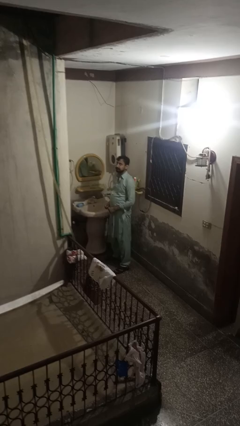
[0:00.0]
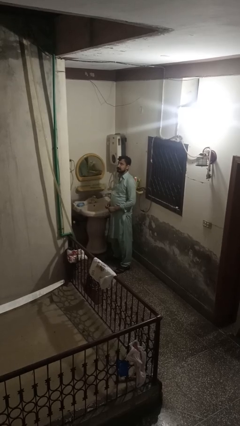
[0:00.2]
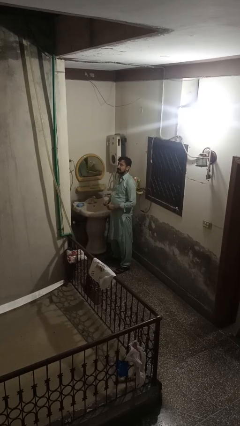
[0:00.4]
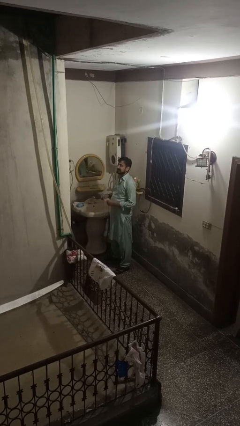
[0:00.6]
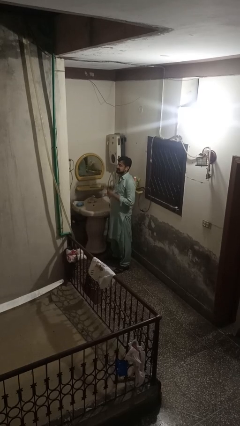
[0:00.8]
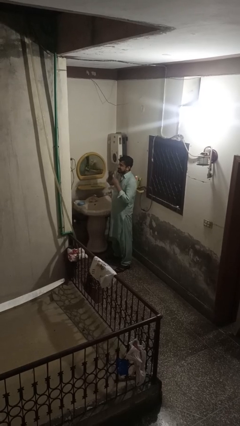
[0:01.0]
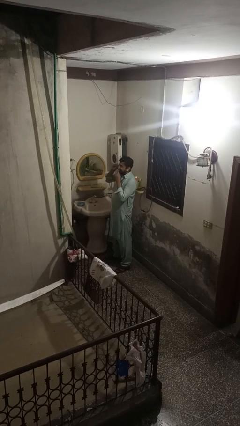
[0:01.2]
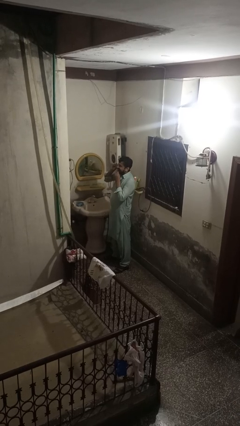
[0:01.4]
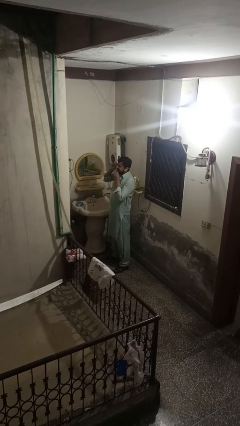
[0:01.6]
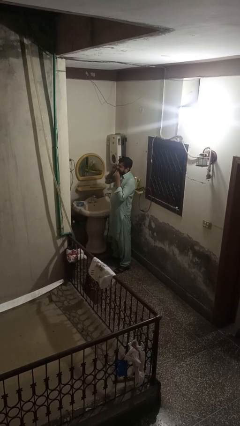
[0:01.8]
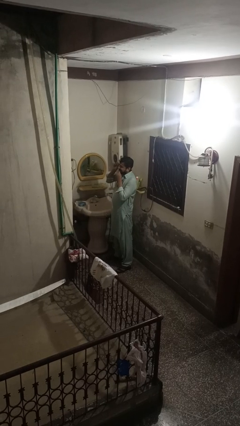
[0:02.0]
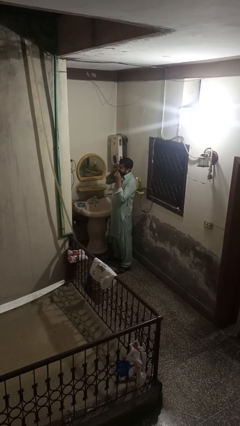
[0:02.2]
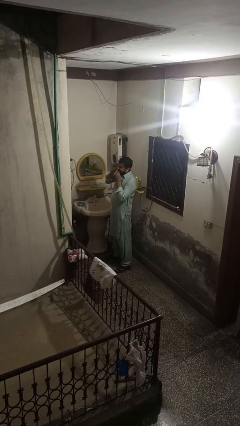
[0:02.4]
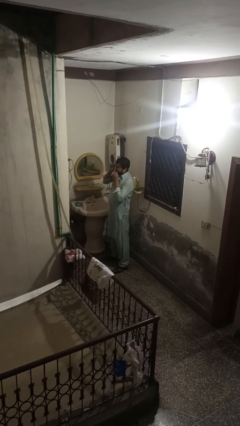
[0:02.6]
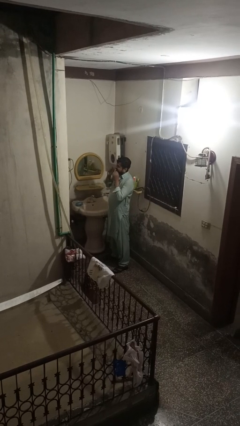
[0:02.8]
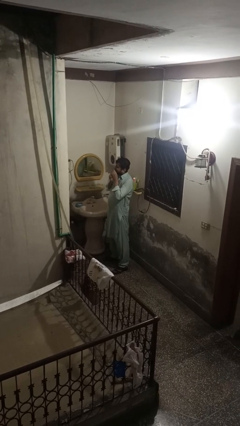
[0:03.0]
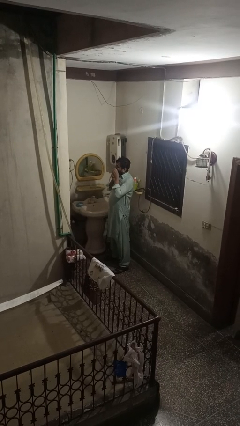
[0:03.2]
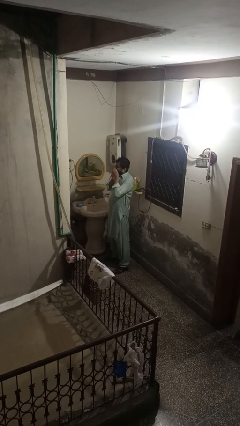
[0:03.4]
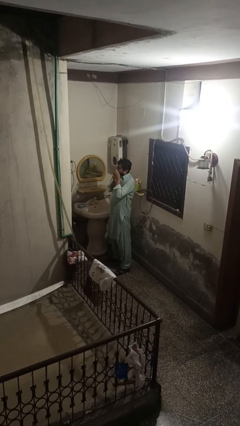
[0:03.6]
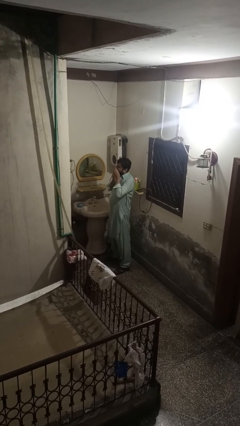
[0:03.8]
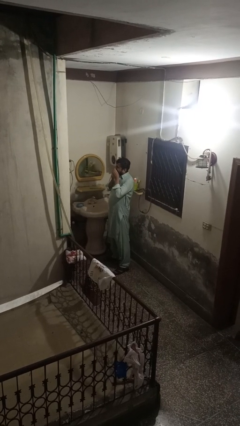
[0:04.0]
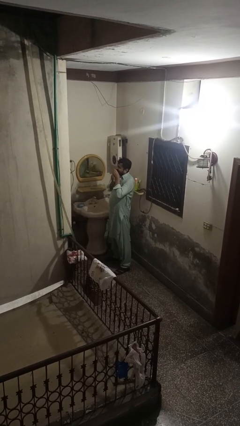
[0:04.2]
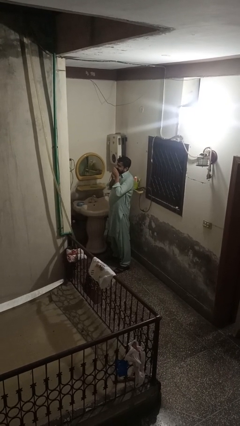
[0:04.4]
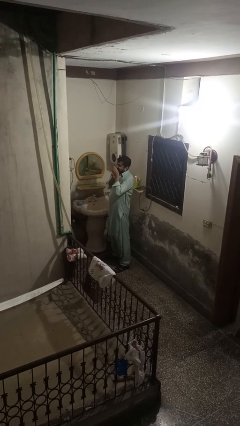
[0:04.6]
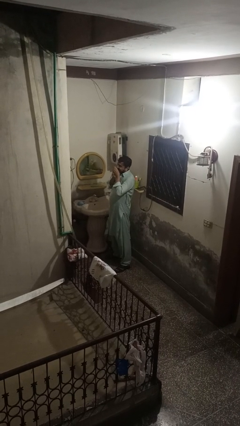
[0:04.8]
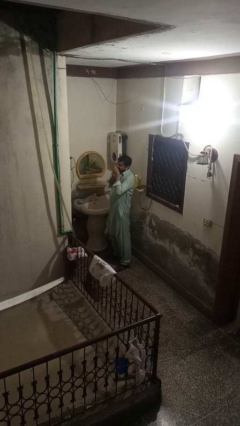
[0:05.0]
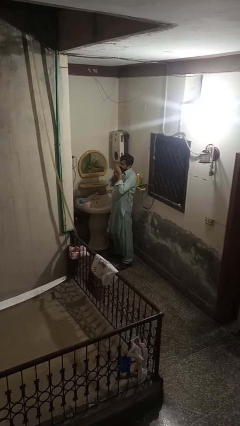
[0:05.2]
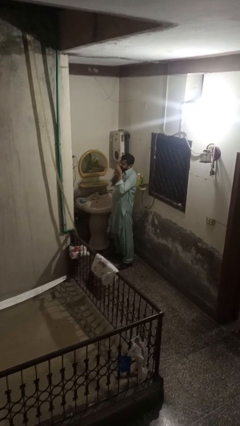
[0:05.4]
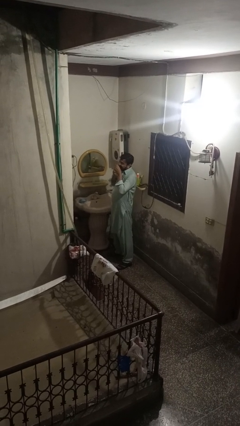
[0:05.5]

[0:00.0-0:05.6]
person flosses

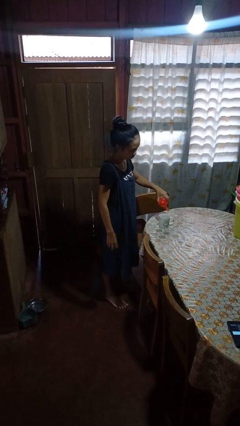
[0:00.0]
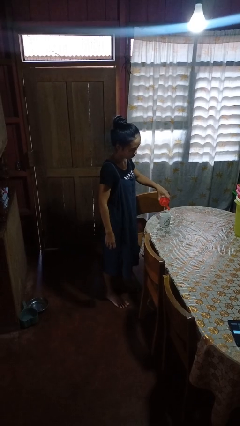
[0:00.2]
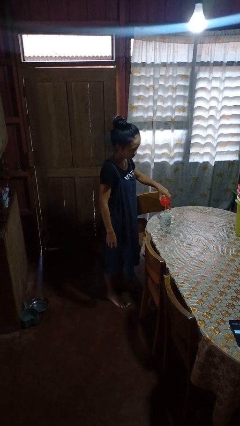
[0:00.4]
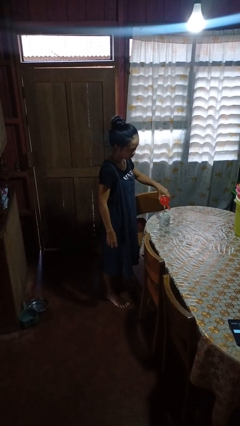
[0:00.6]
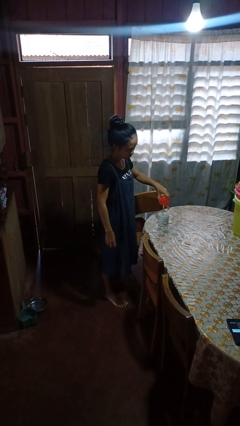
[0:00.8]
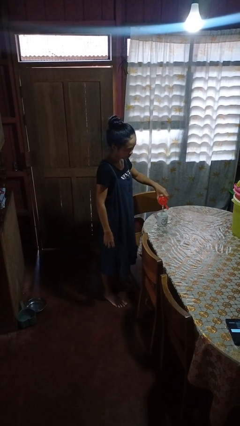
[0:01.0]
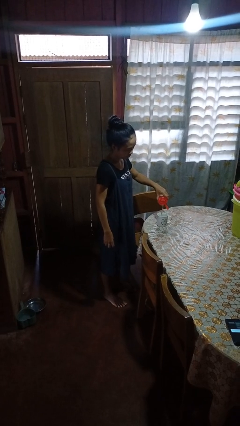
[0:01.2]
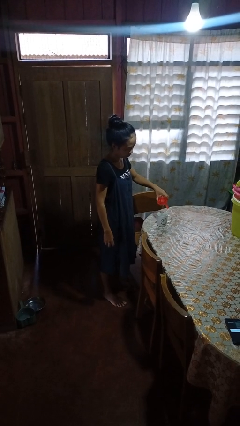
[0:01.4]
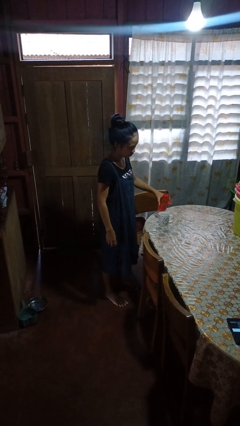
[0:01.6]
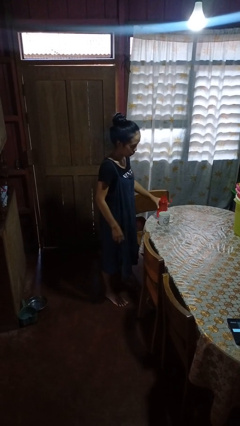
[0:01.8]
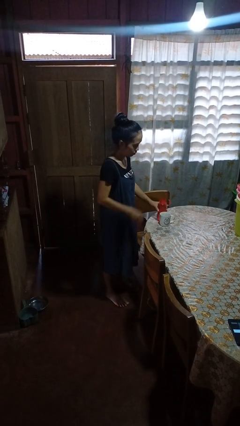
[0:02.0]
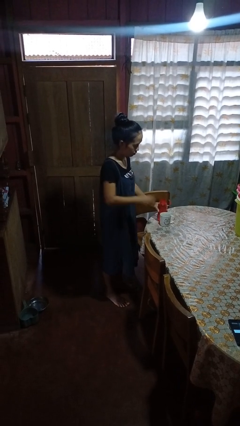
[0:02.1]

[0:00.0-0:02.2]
person pours liquid into cup

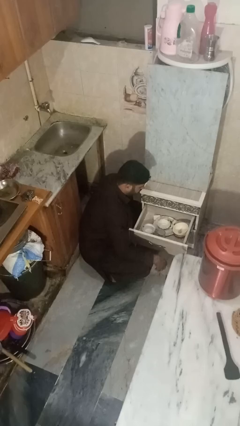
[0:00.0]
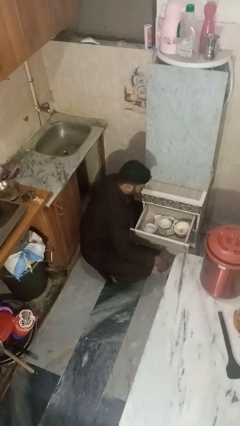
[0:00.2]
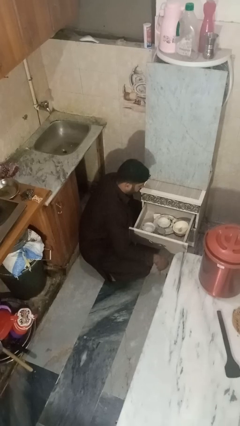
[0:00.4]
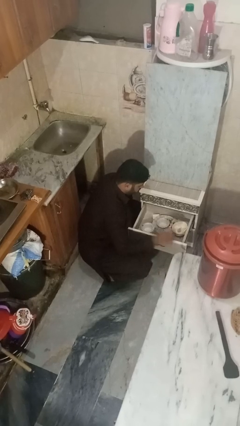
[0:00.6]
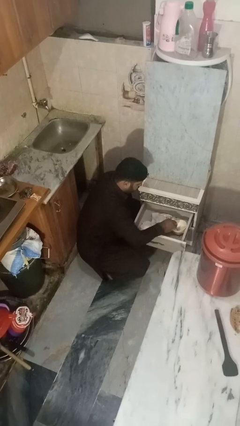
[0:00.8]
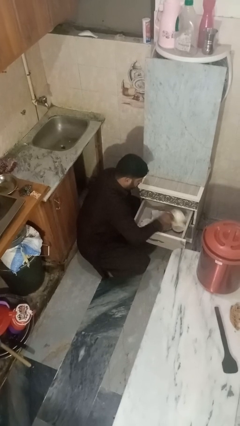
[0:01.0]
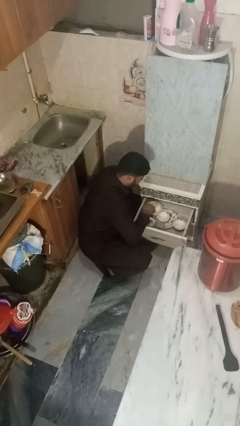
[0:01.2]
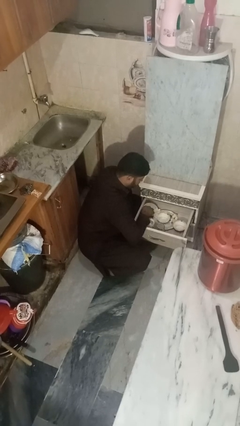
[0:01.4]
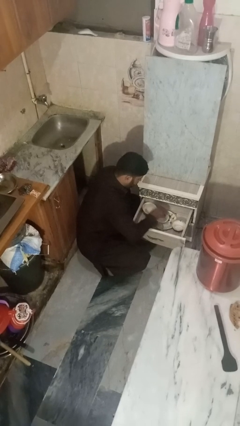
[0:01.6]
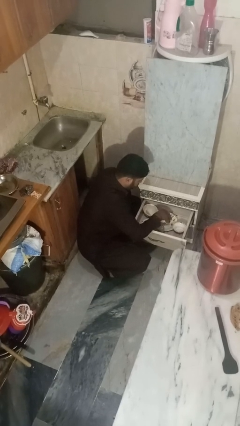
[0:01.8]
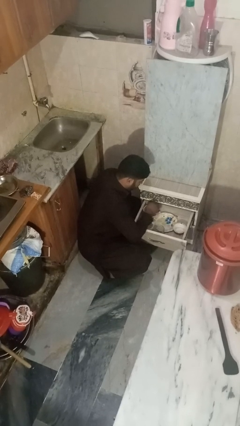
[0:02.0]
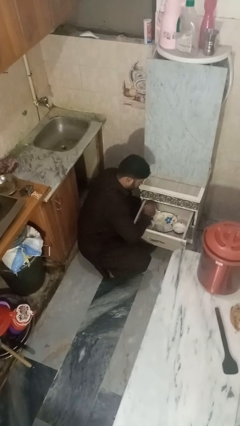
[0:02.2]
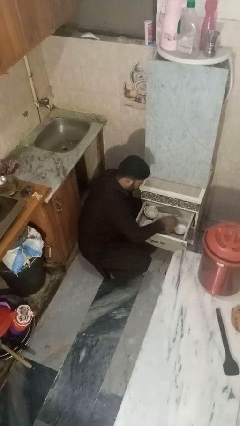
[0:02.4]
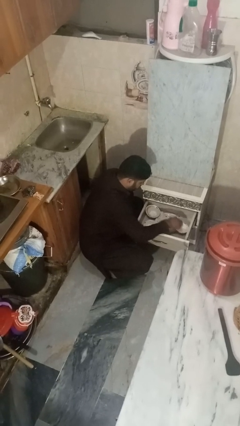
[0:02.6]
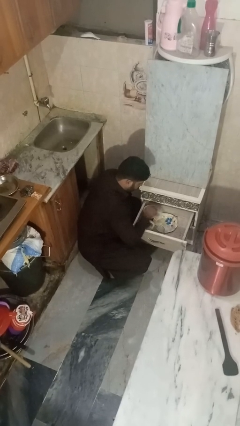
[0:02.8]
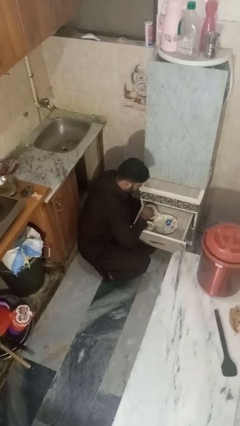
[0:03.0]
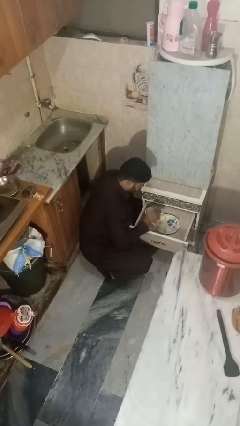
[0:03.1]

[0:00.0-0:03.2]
person searches in kitchen drawer

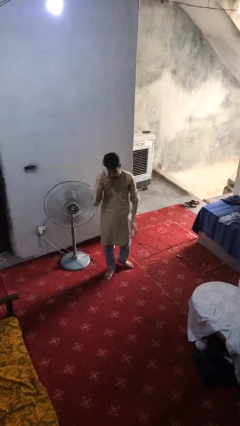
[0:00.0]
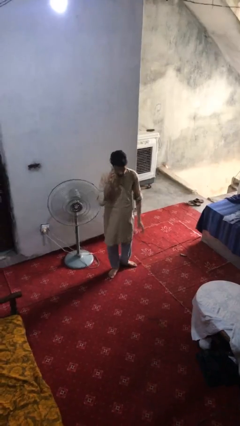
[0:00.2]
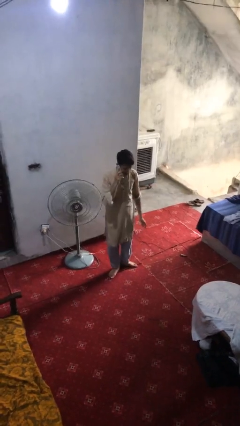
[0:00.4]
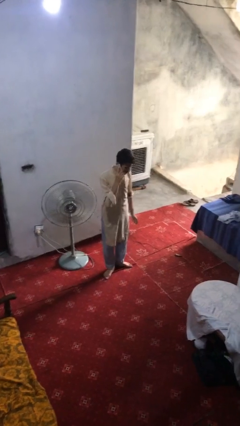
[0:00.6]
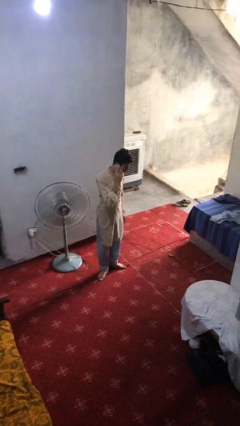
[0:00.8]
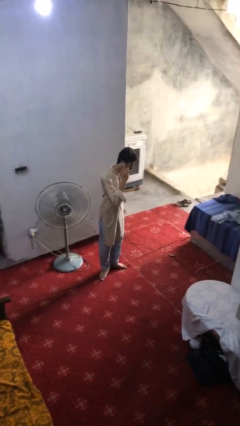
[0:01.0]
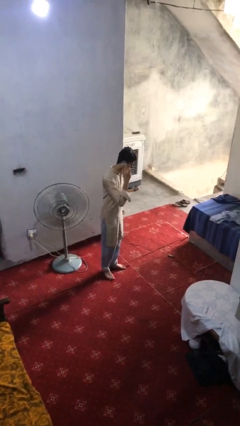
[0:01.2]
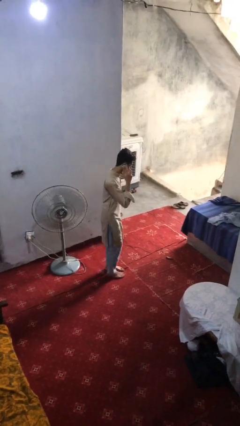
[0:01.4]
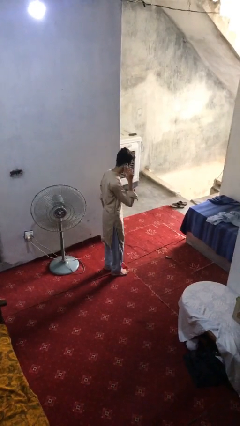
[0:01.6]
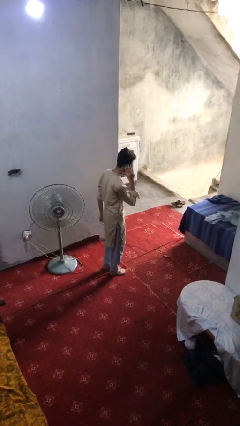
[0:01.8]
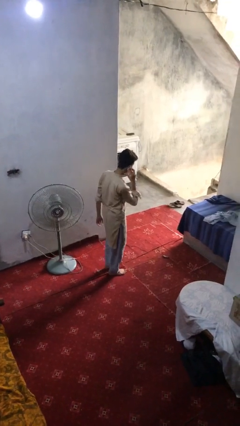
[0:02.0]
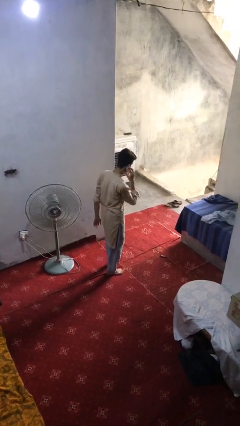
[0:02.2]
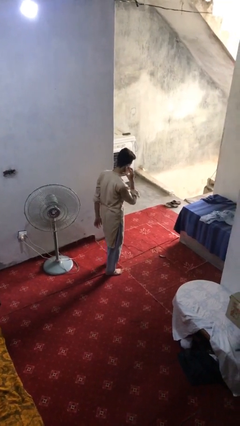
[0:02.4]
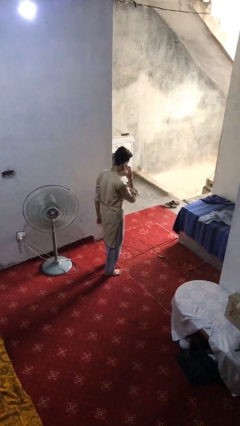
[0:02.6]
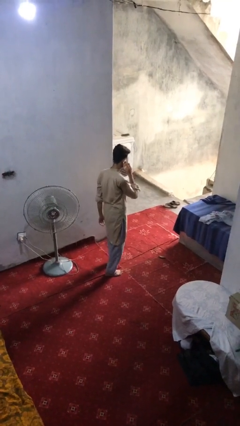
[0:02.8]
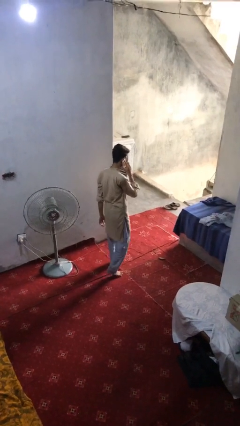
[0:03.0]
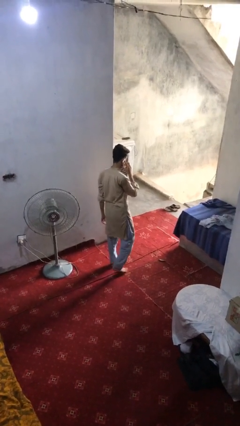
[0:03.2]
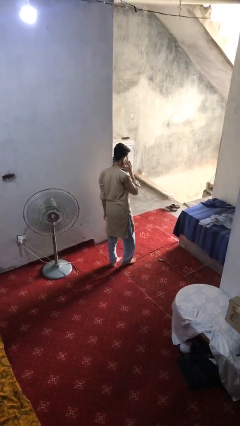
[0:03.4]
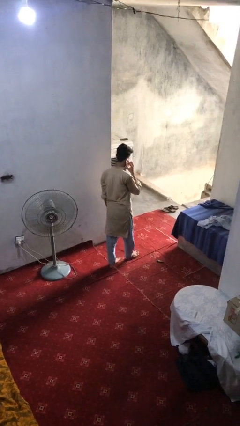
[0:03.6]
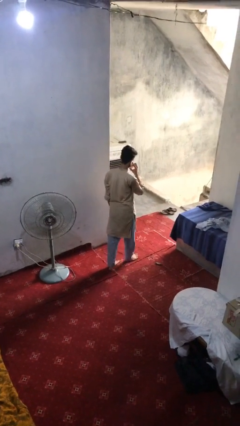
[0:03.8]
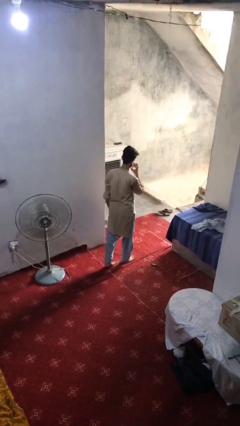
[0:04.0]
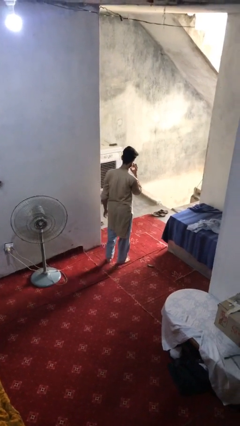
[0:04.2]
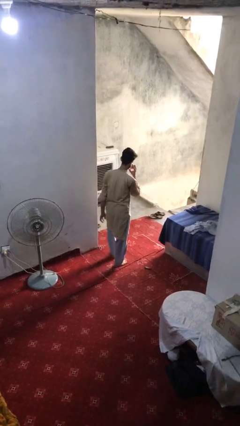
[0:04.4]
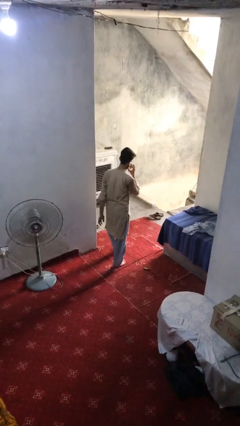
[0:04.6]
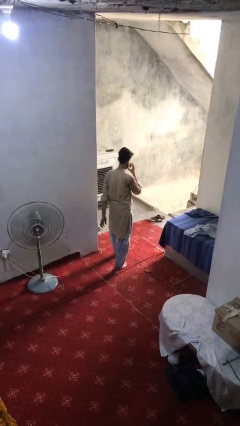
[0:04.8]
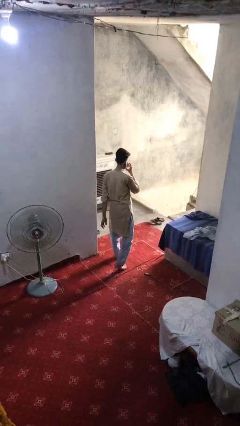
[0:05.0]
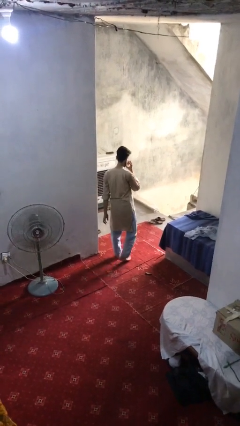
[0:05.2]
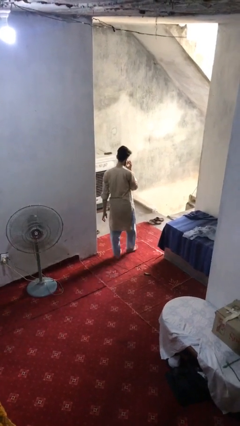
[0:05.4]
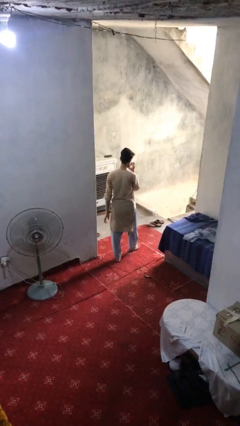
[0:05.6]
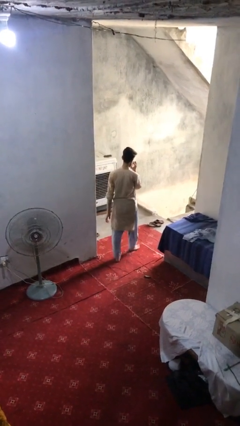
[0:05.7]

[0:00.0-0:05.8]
person talks on phone

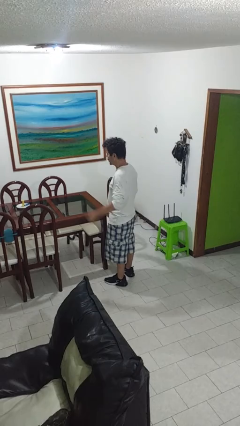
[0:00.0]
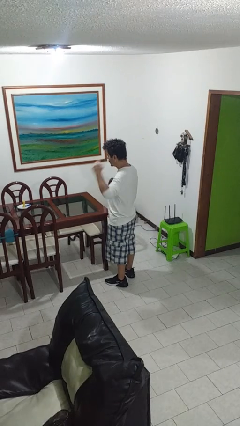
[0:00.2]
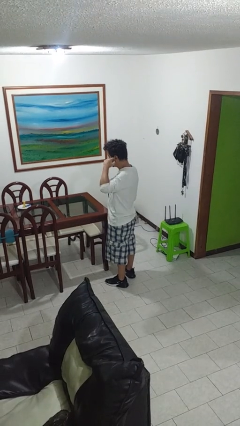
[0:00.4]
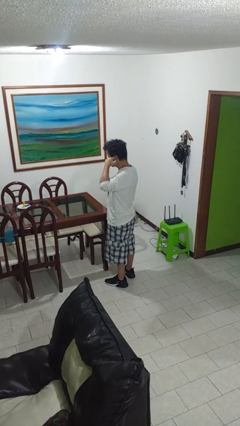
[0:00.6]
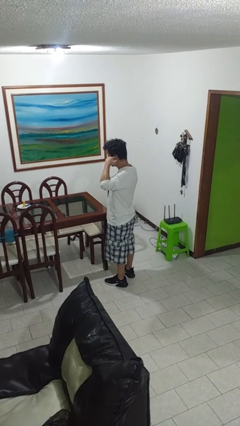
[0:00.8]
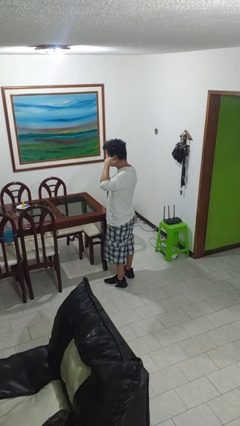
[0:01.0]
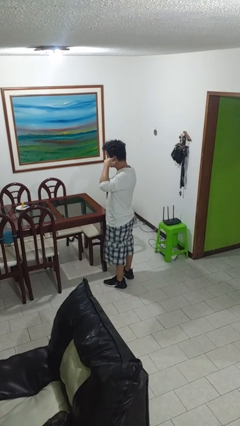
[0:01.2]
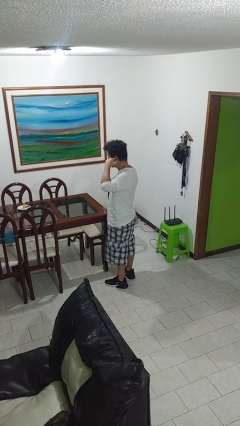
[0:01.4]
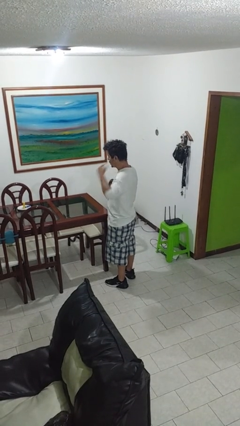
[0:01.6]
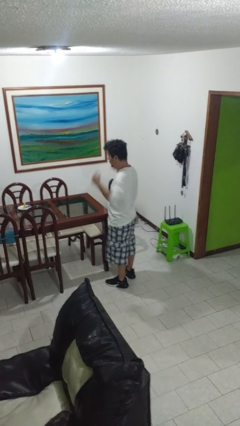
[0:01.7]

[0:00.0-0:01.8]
person puts fingers in ear
